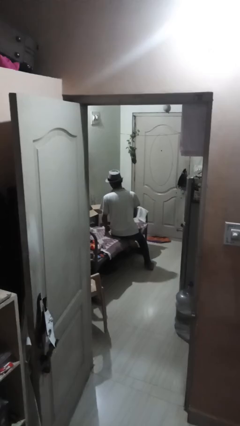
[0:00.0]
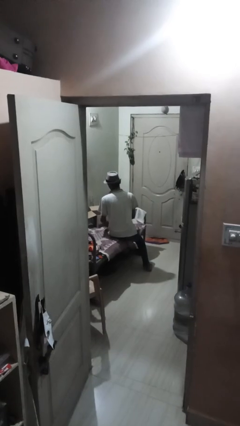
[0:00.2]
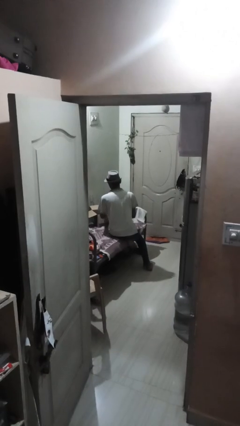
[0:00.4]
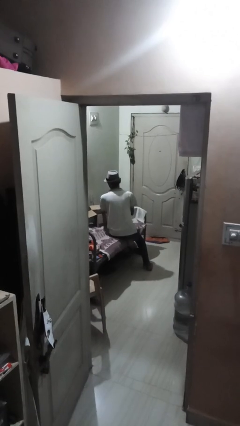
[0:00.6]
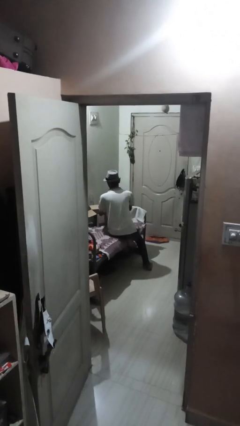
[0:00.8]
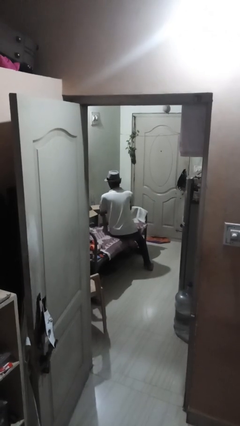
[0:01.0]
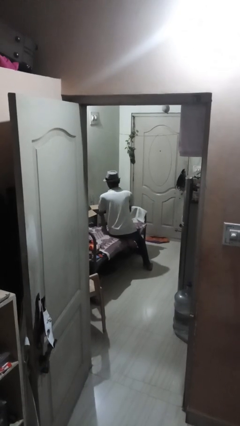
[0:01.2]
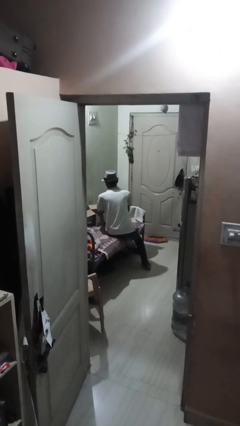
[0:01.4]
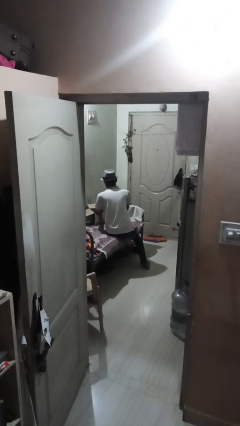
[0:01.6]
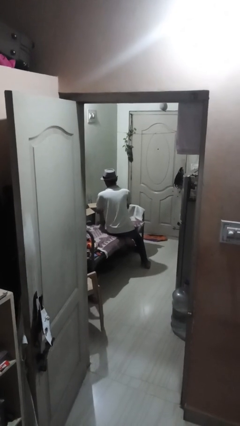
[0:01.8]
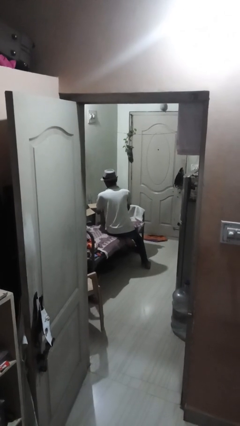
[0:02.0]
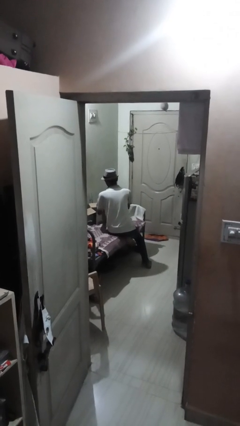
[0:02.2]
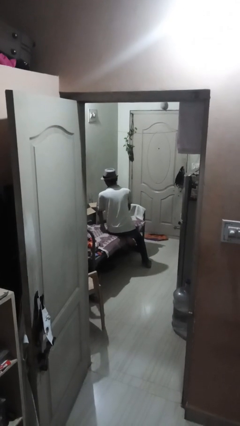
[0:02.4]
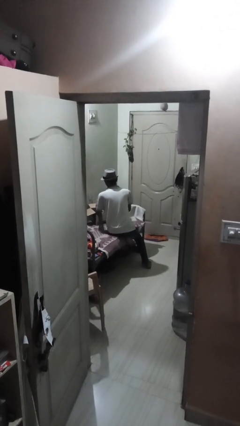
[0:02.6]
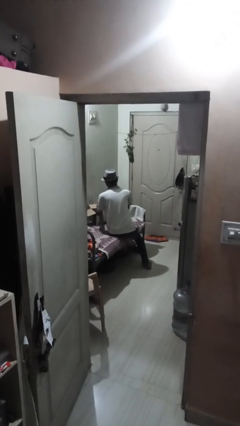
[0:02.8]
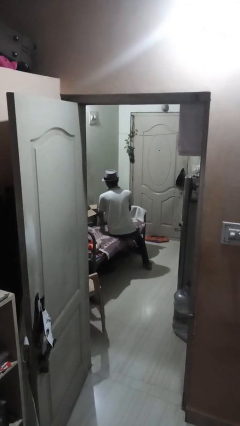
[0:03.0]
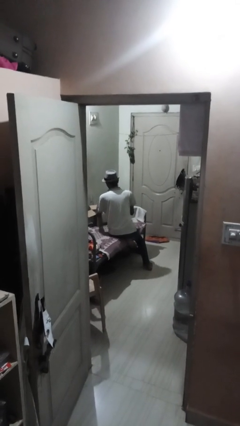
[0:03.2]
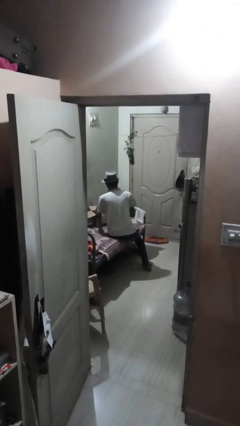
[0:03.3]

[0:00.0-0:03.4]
person searches in box
